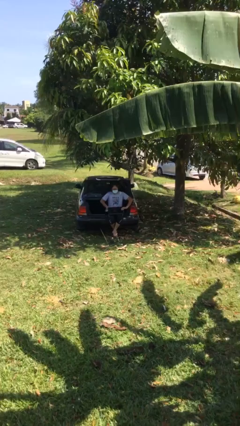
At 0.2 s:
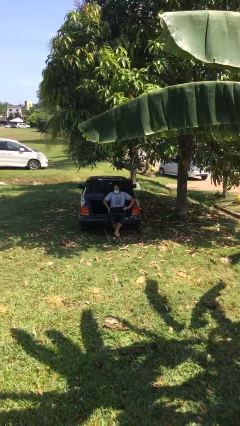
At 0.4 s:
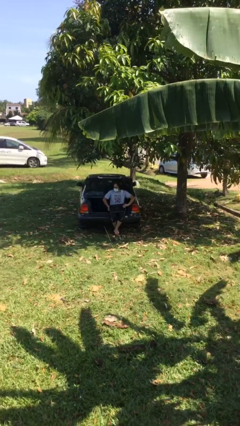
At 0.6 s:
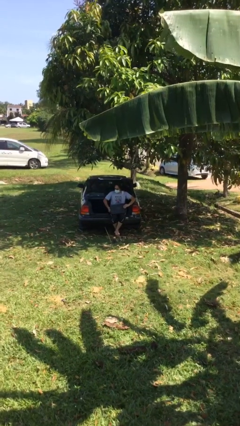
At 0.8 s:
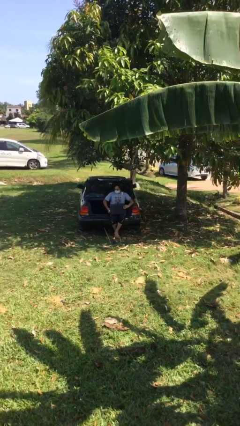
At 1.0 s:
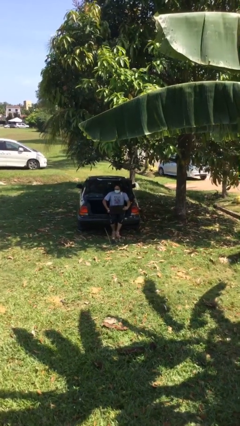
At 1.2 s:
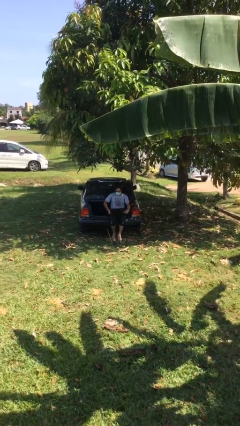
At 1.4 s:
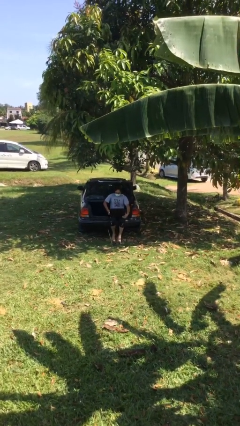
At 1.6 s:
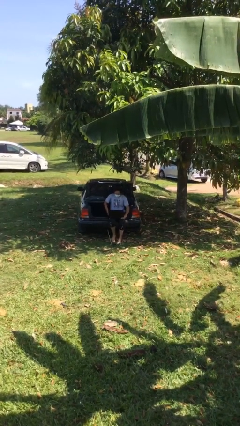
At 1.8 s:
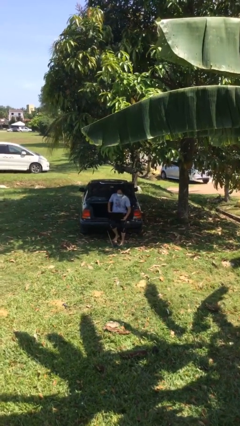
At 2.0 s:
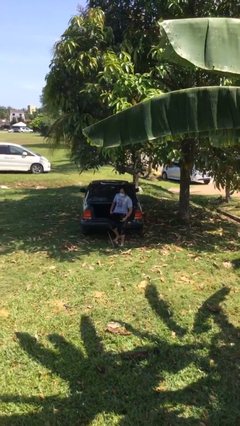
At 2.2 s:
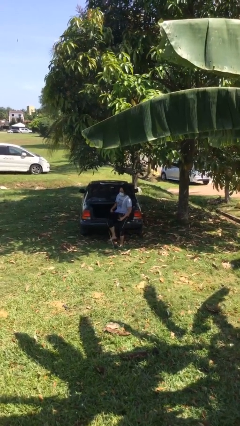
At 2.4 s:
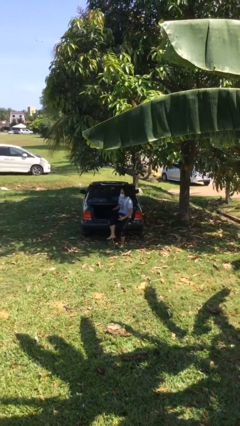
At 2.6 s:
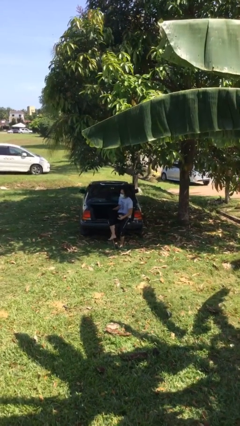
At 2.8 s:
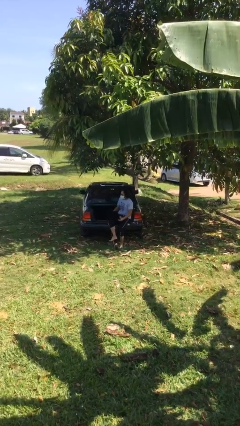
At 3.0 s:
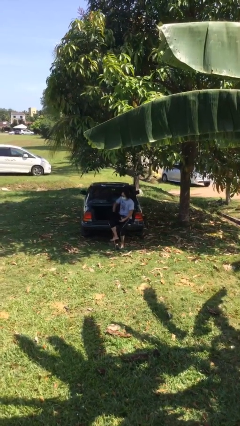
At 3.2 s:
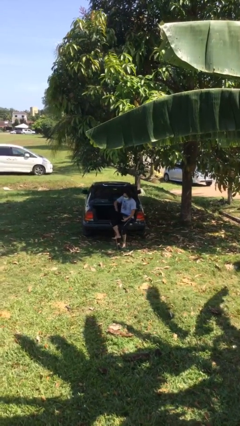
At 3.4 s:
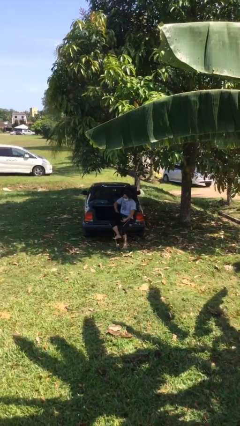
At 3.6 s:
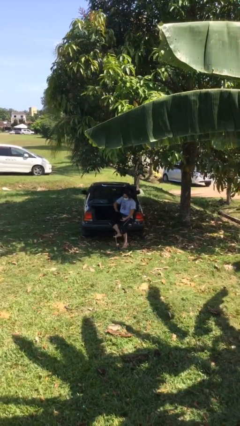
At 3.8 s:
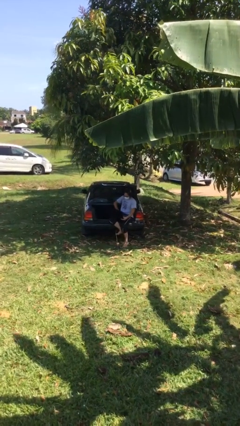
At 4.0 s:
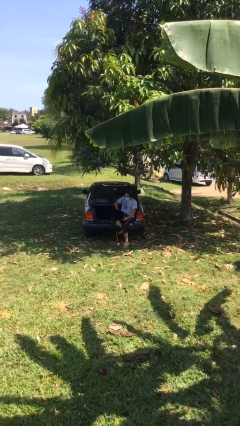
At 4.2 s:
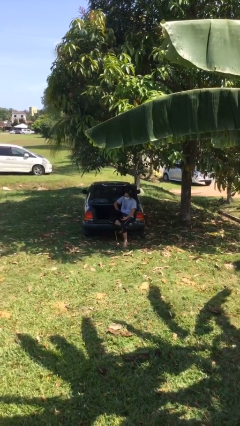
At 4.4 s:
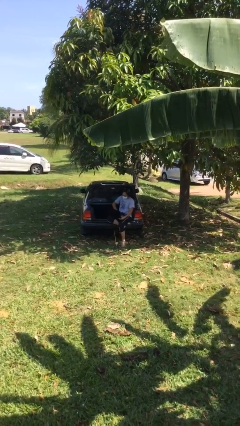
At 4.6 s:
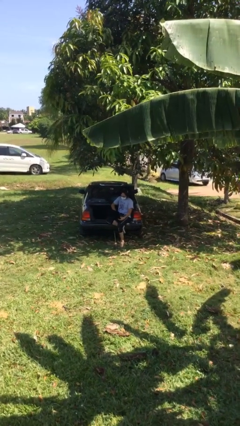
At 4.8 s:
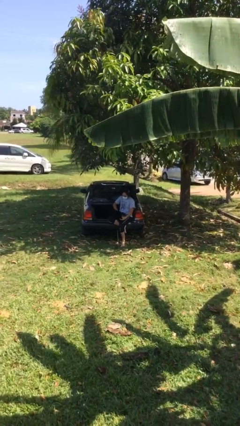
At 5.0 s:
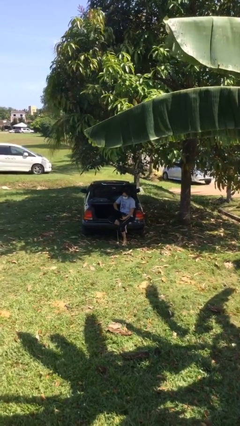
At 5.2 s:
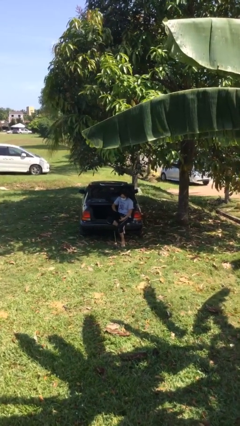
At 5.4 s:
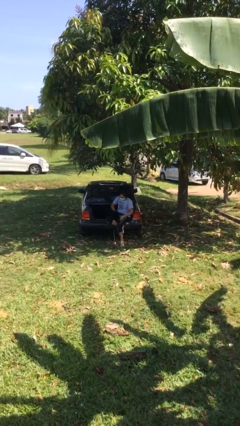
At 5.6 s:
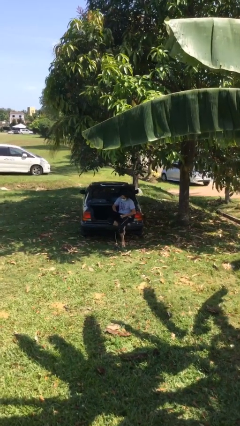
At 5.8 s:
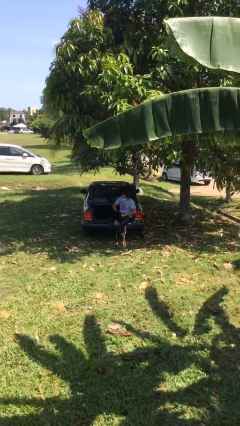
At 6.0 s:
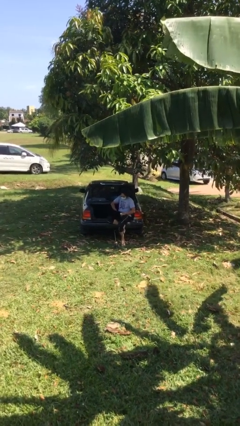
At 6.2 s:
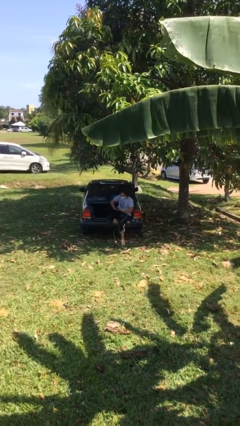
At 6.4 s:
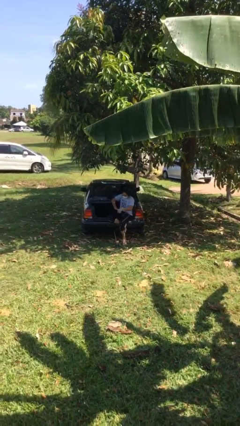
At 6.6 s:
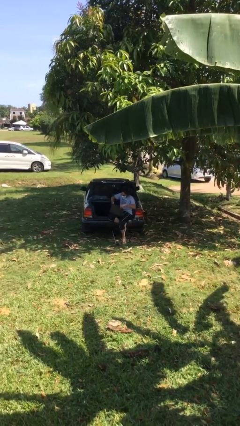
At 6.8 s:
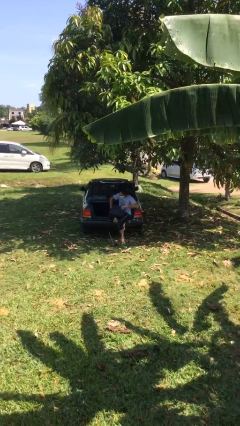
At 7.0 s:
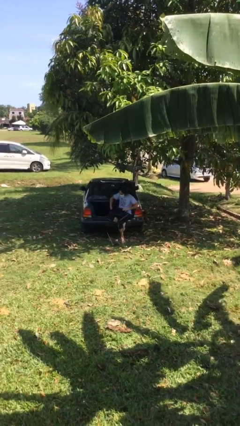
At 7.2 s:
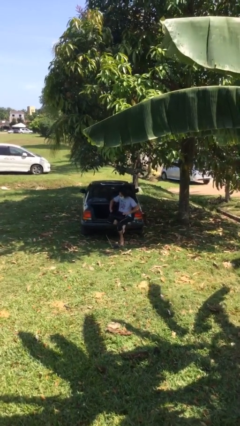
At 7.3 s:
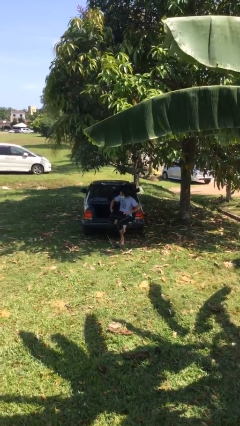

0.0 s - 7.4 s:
person interacts with laptop

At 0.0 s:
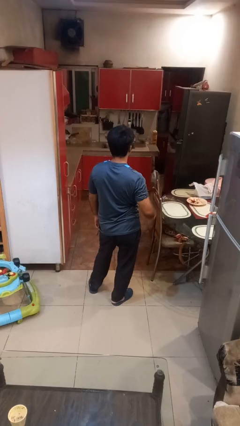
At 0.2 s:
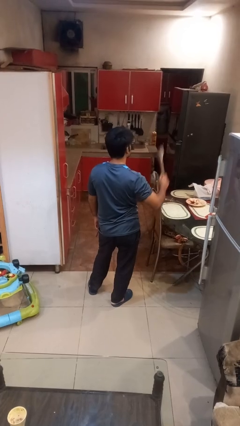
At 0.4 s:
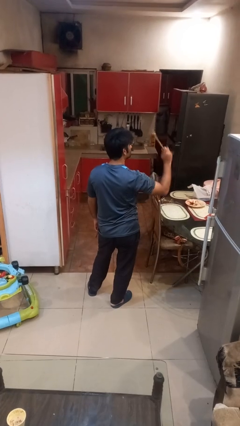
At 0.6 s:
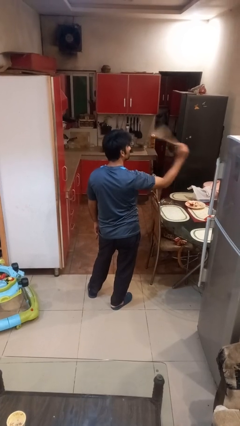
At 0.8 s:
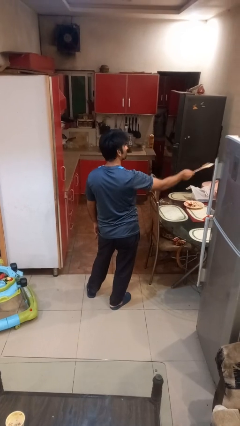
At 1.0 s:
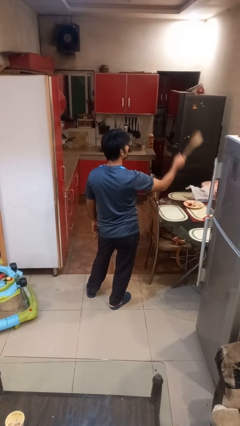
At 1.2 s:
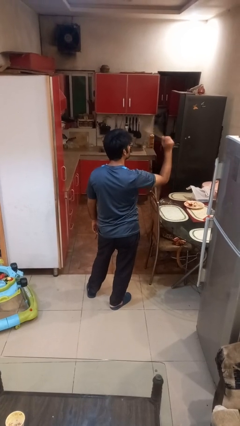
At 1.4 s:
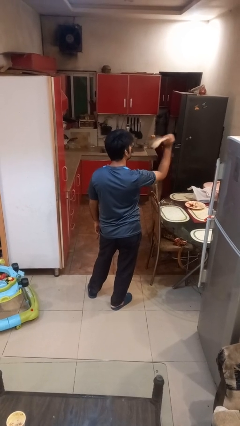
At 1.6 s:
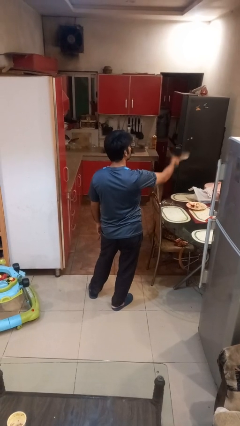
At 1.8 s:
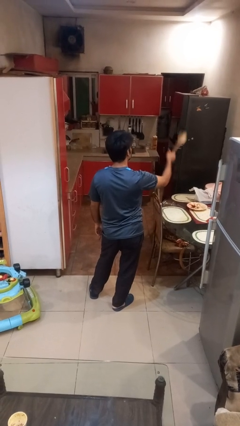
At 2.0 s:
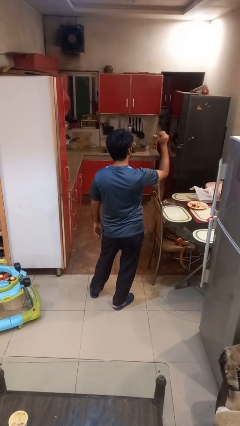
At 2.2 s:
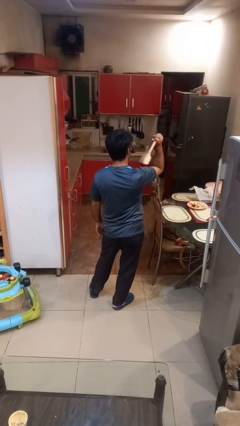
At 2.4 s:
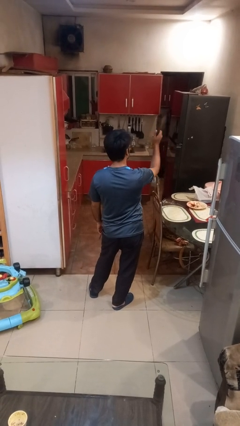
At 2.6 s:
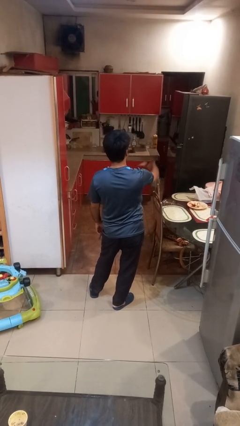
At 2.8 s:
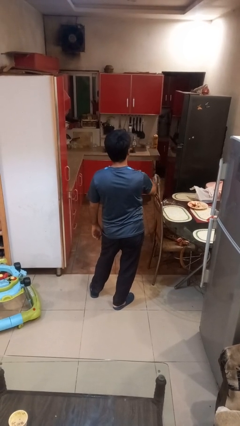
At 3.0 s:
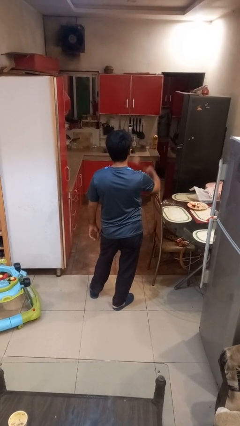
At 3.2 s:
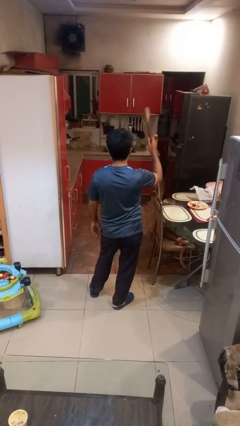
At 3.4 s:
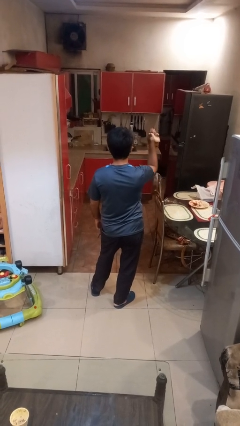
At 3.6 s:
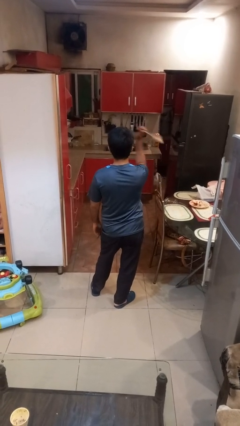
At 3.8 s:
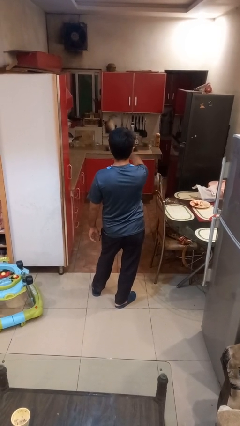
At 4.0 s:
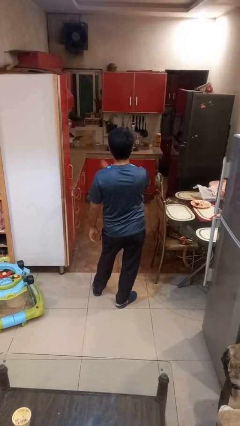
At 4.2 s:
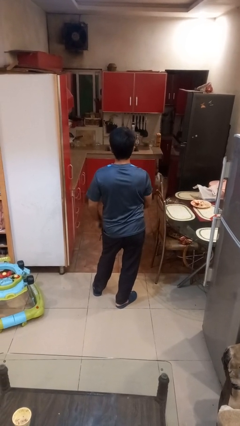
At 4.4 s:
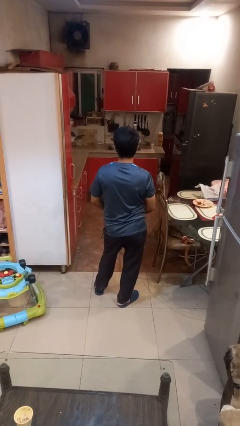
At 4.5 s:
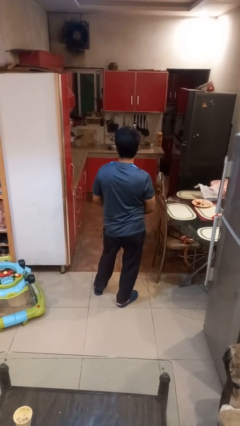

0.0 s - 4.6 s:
person swats bug

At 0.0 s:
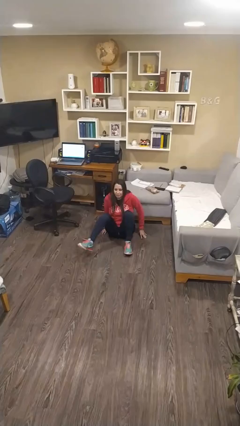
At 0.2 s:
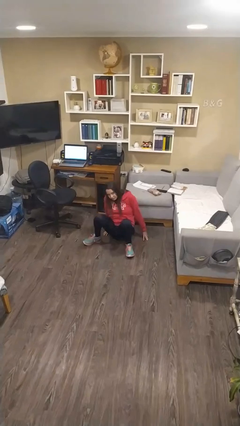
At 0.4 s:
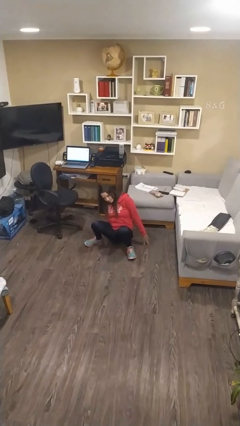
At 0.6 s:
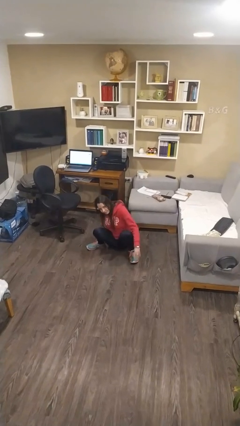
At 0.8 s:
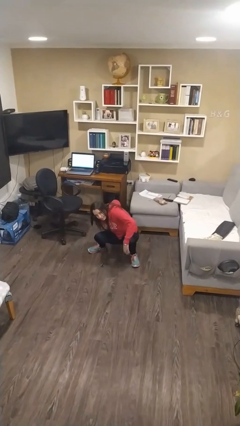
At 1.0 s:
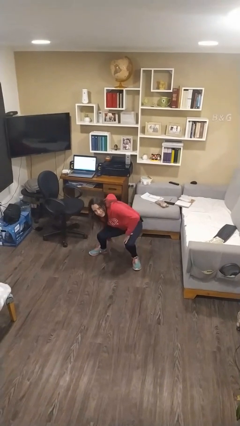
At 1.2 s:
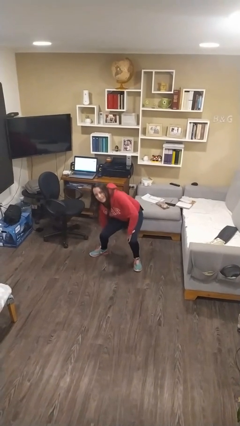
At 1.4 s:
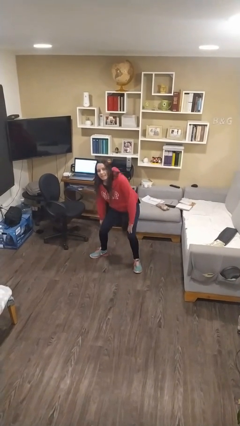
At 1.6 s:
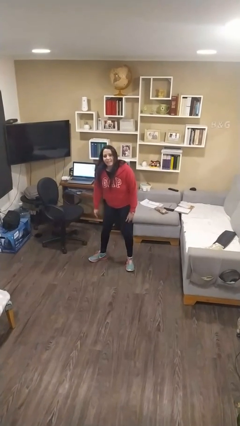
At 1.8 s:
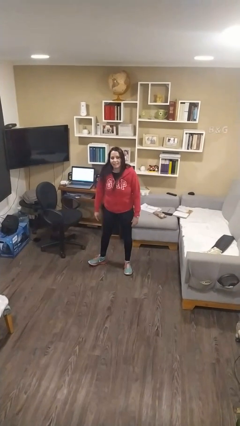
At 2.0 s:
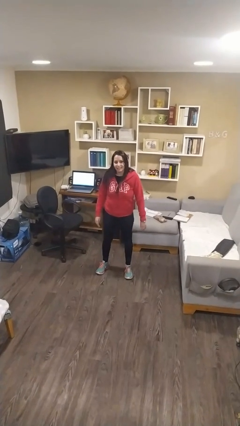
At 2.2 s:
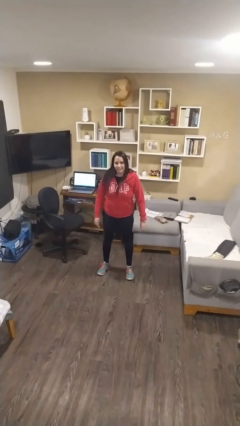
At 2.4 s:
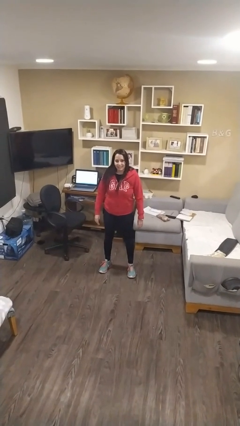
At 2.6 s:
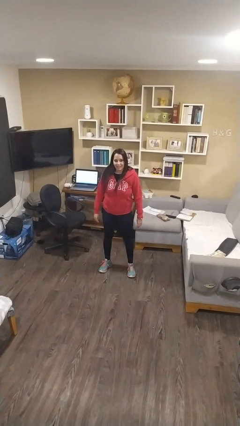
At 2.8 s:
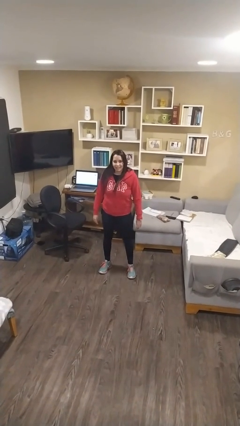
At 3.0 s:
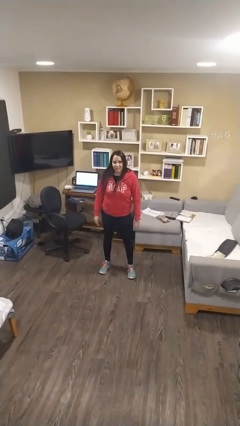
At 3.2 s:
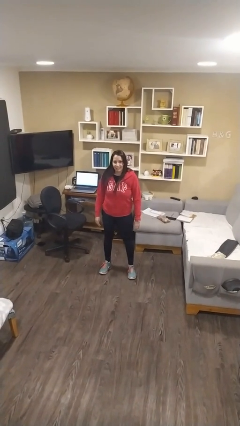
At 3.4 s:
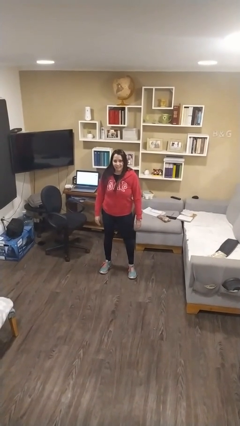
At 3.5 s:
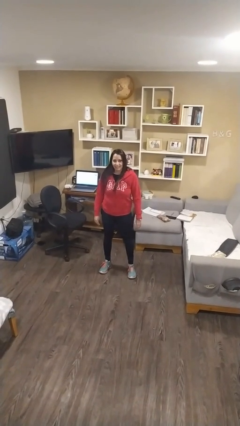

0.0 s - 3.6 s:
person stands up from floor

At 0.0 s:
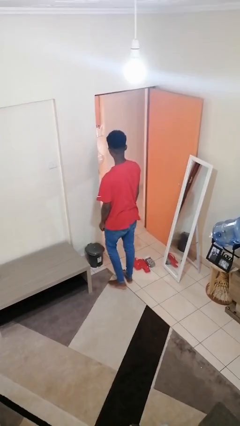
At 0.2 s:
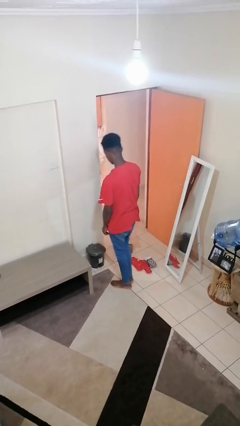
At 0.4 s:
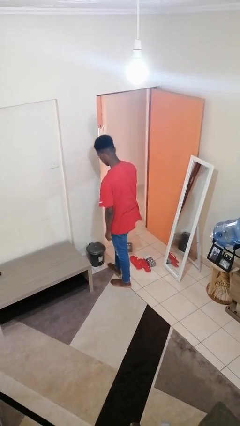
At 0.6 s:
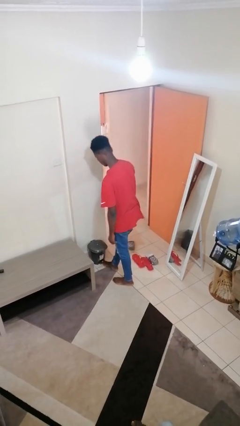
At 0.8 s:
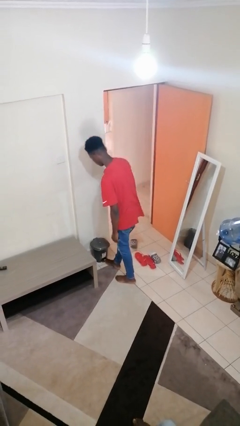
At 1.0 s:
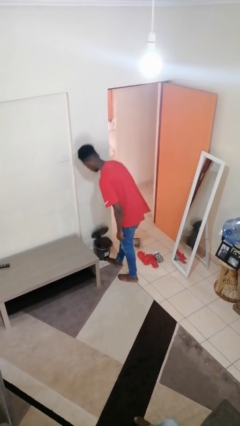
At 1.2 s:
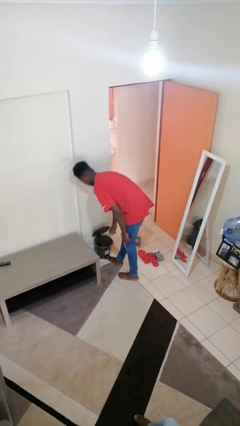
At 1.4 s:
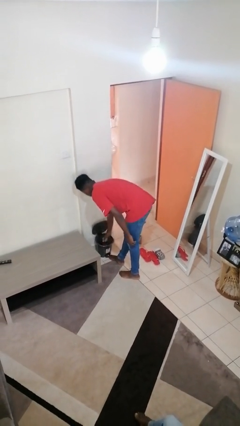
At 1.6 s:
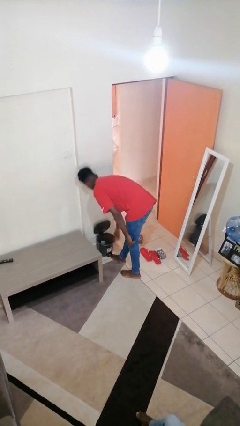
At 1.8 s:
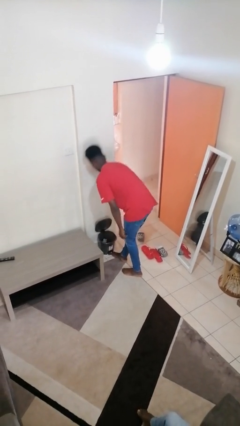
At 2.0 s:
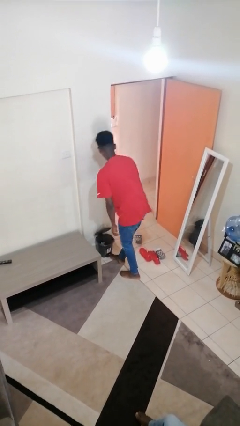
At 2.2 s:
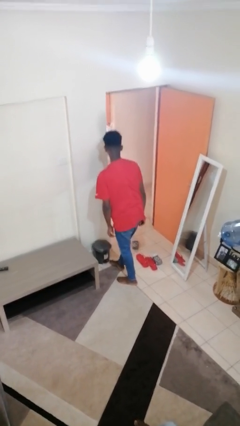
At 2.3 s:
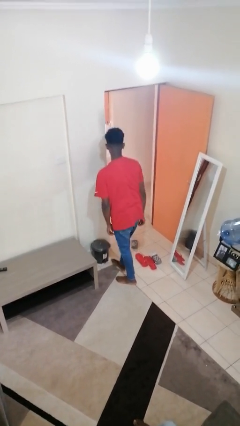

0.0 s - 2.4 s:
person discards trash
